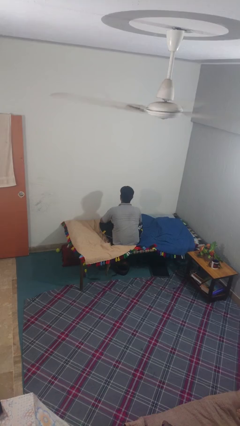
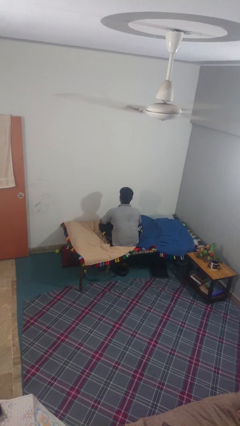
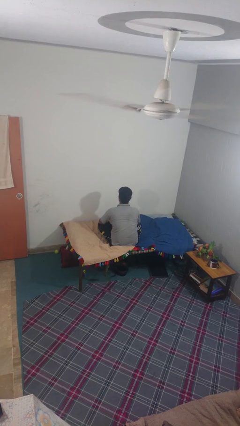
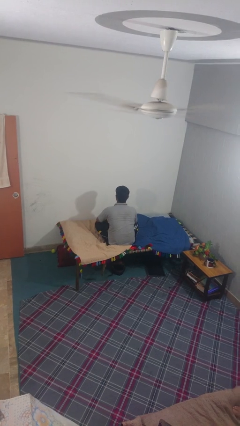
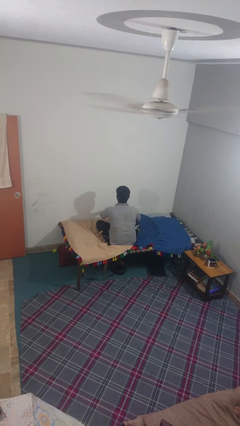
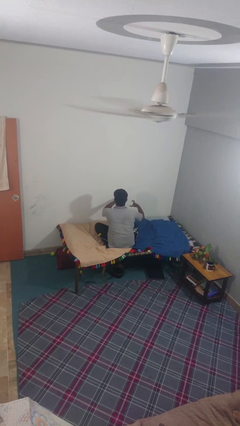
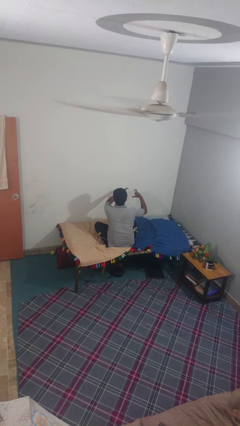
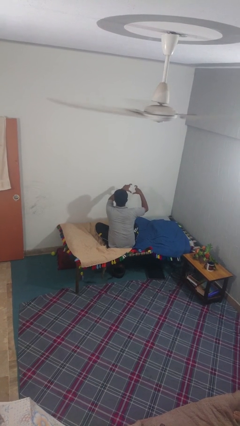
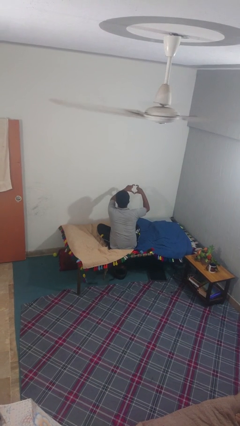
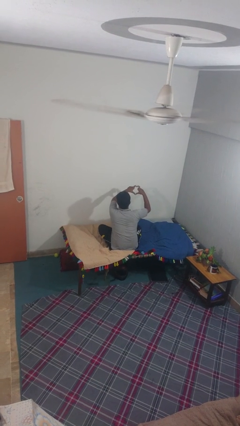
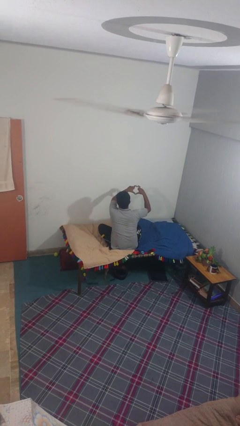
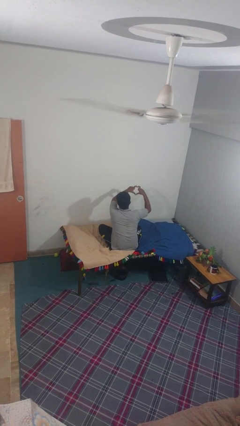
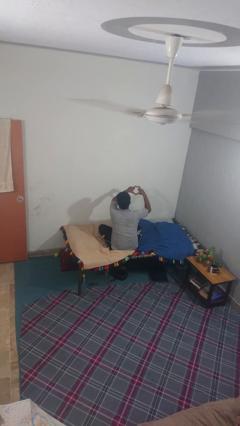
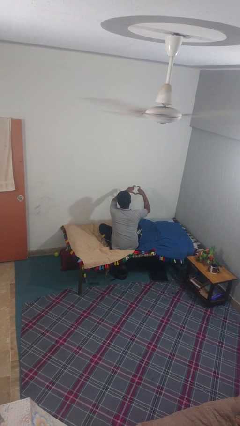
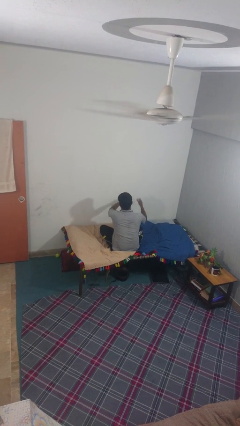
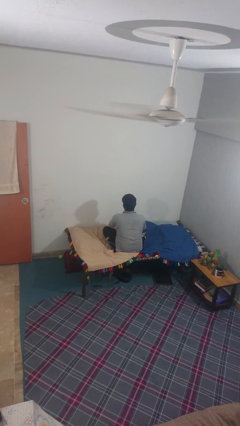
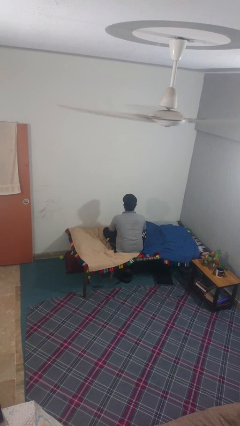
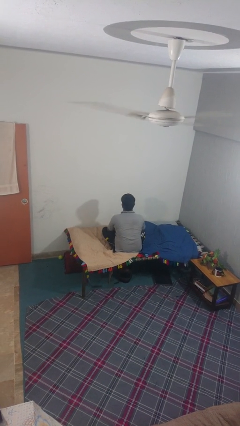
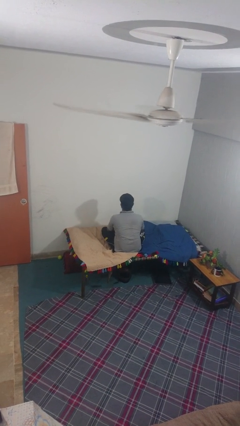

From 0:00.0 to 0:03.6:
person gestures heart

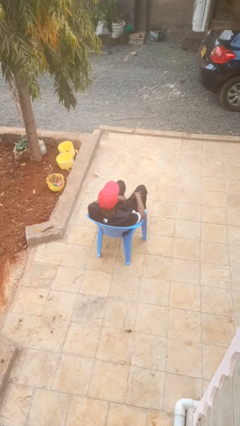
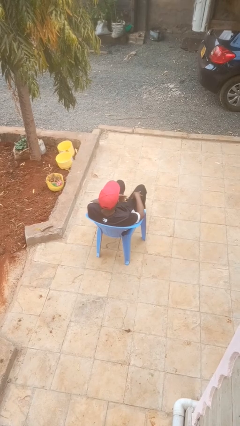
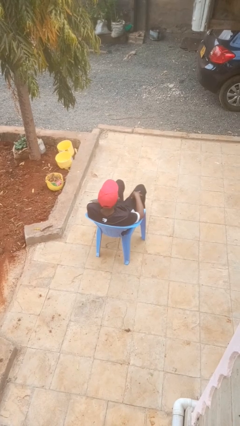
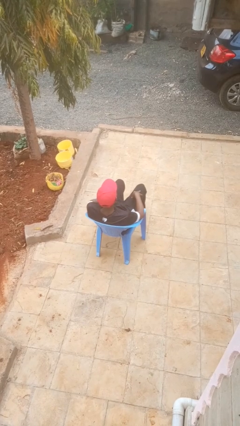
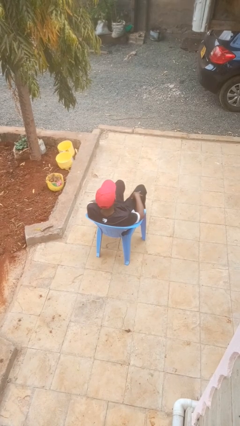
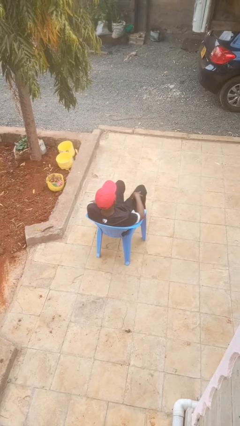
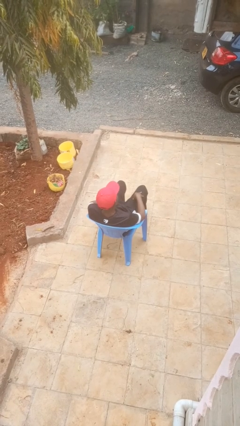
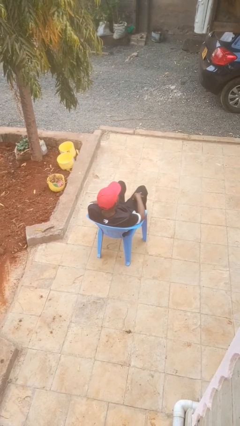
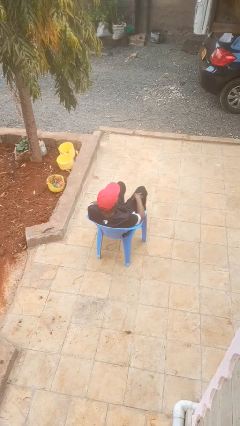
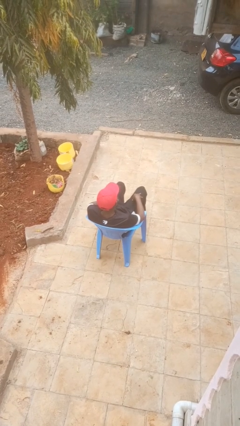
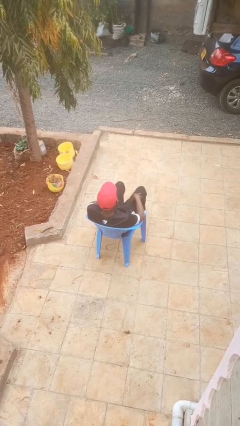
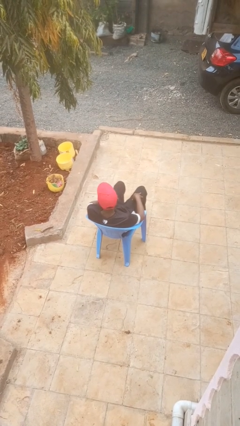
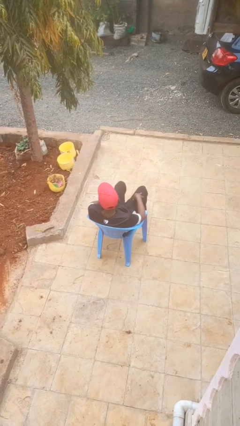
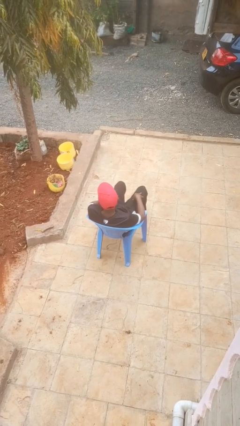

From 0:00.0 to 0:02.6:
person strokes chin

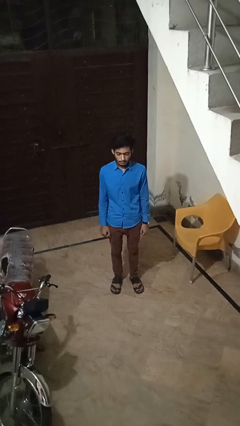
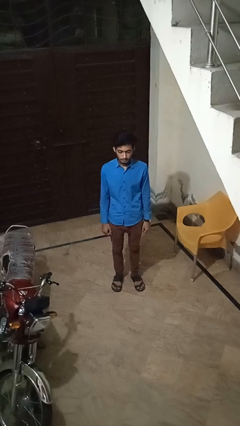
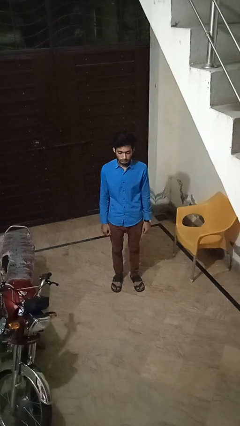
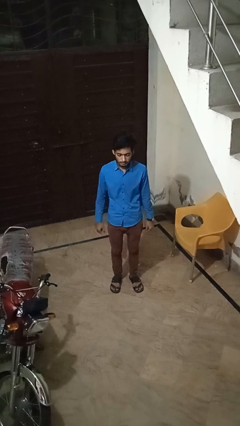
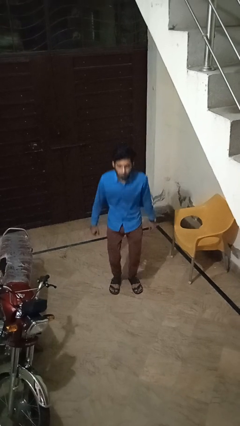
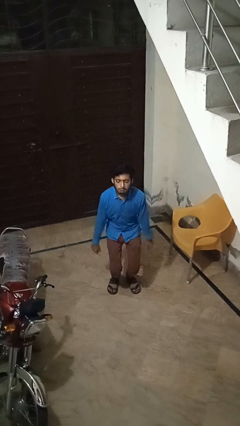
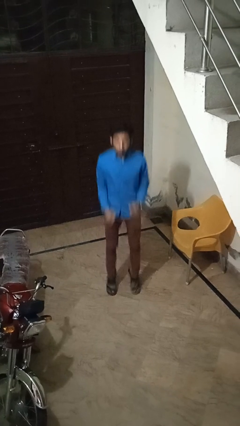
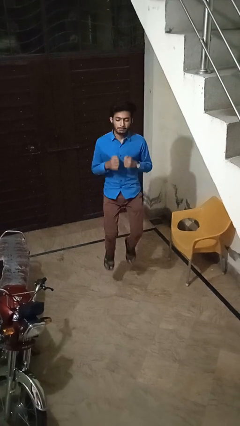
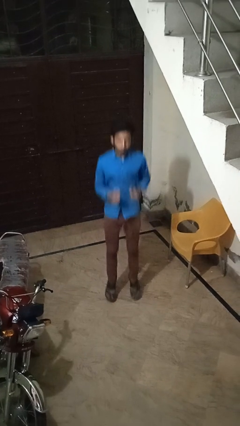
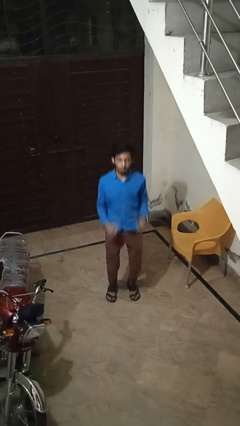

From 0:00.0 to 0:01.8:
person jumps

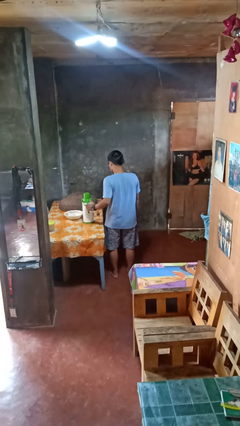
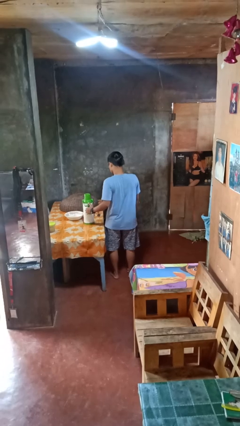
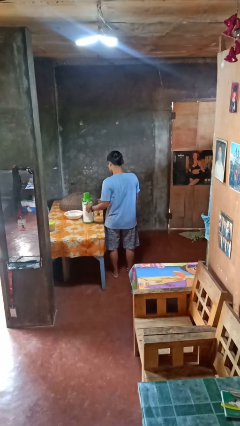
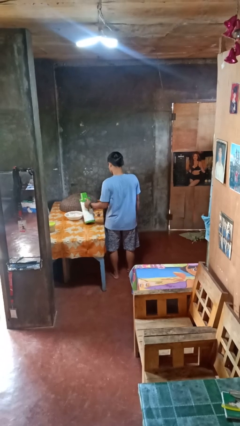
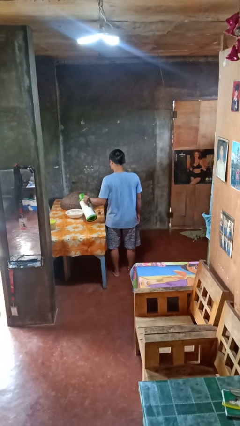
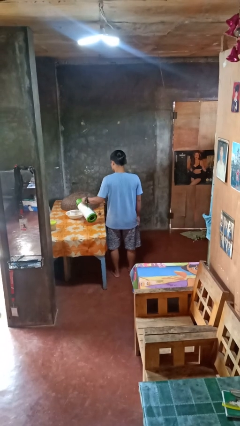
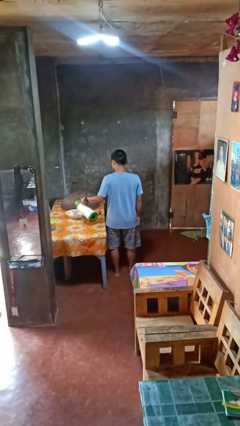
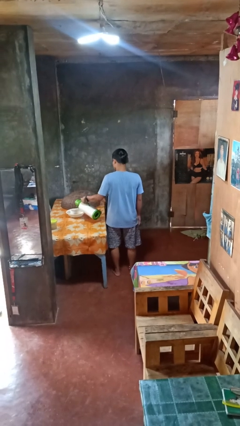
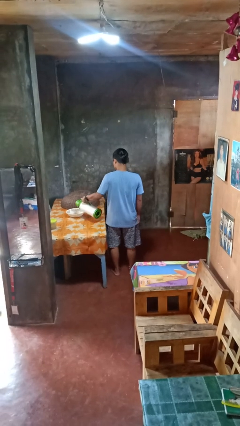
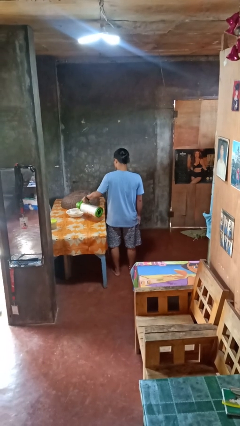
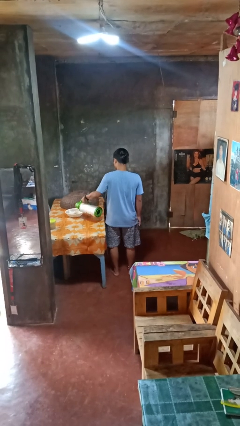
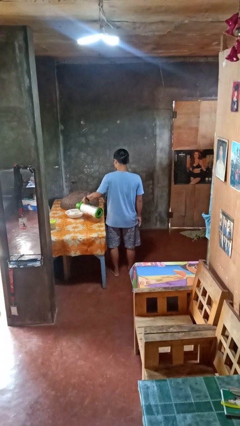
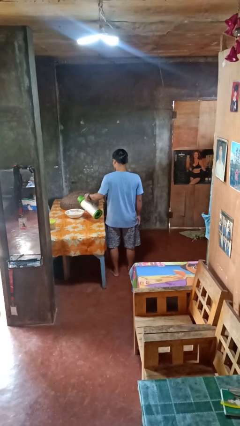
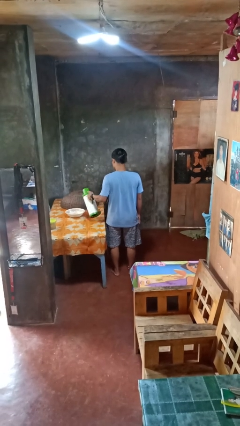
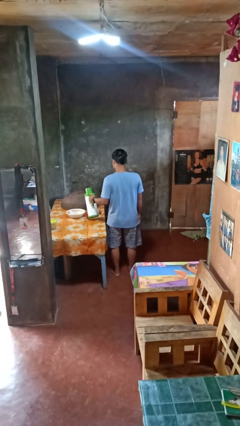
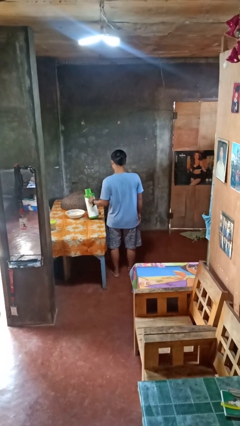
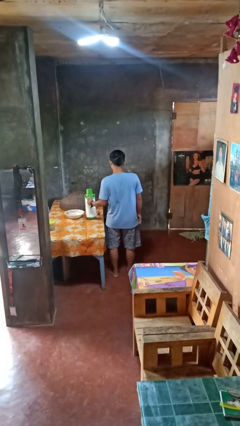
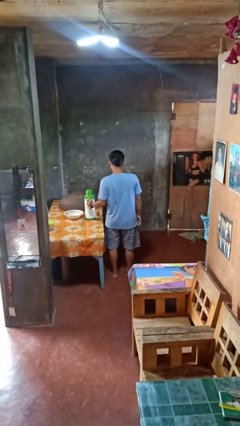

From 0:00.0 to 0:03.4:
person pours into bowl

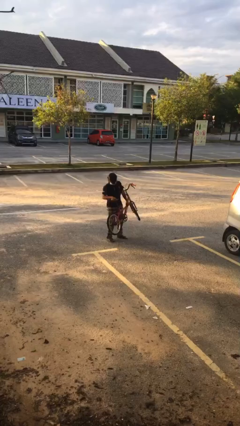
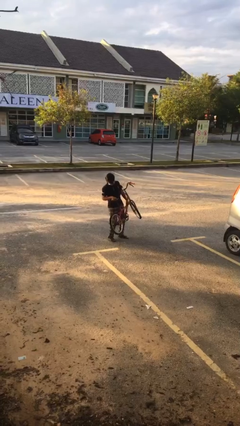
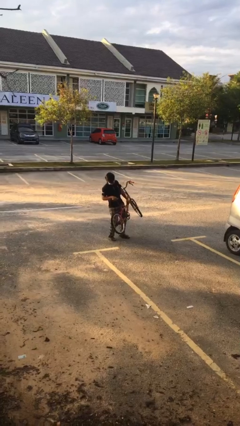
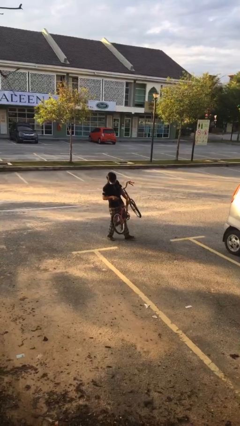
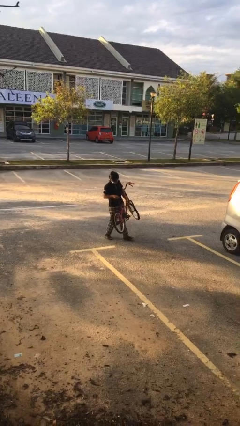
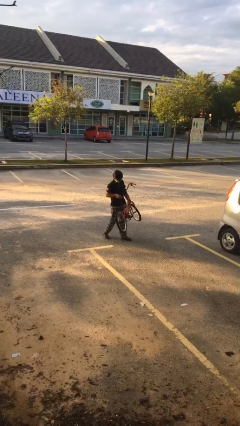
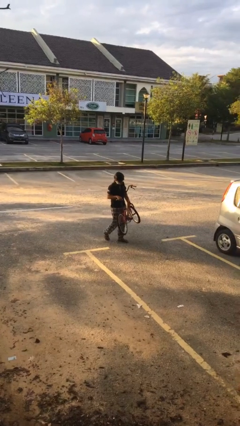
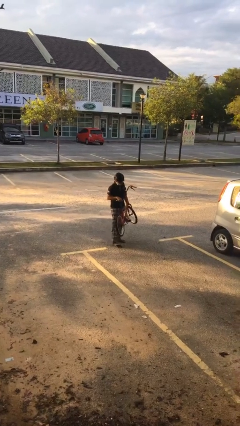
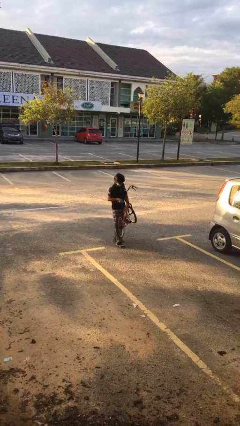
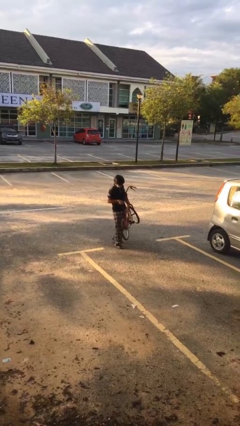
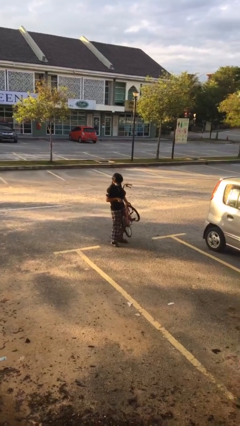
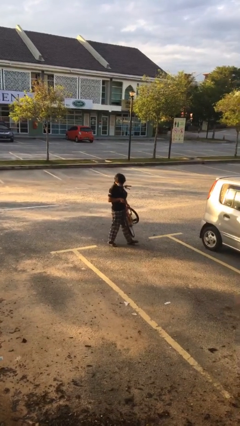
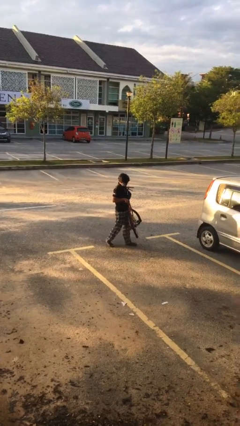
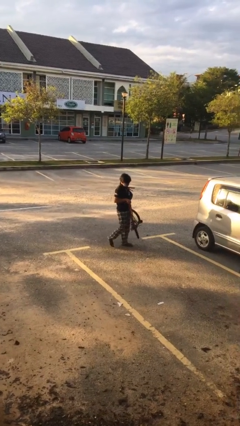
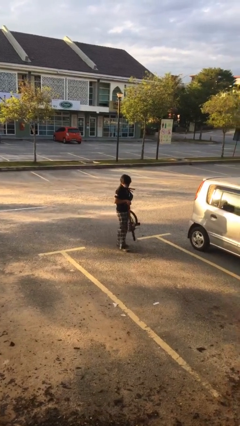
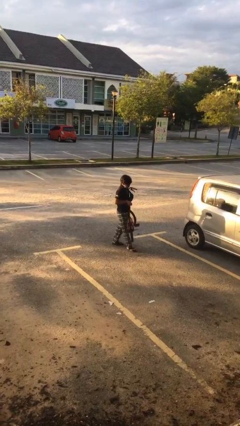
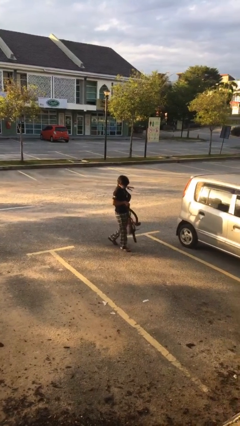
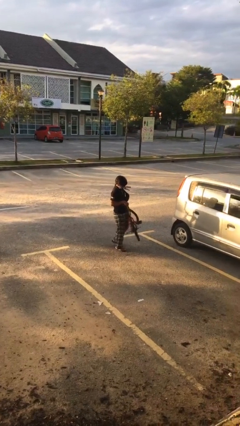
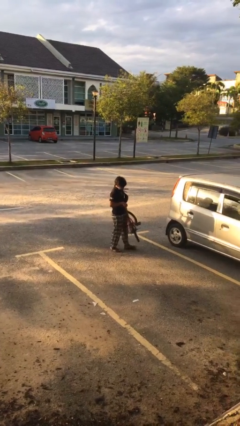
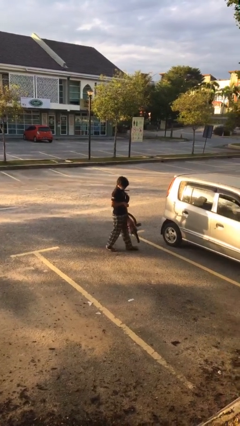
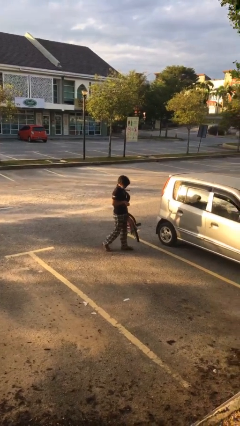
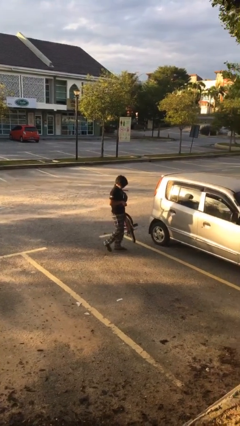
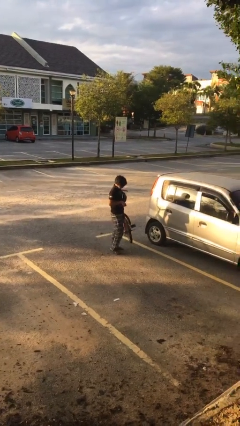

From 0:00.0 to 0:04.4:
person carries heavy object

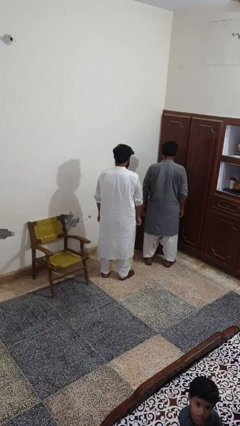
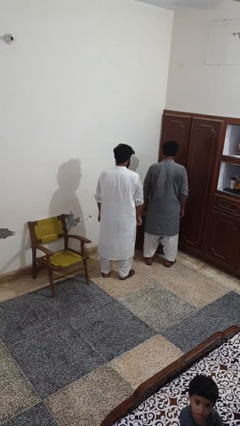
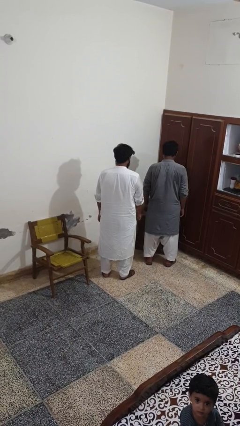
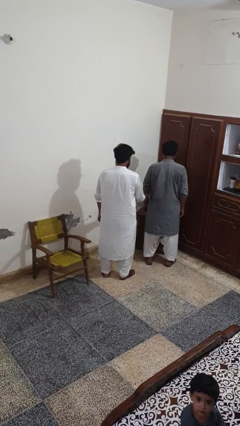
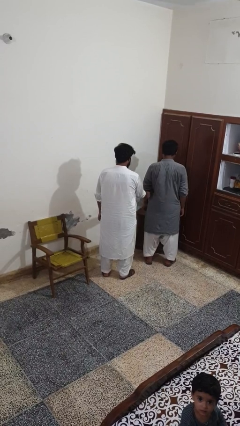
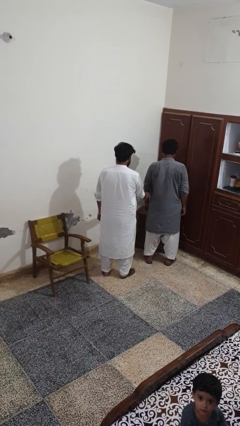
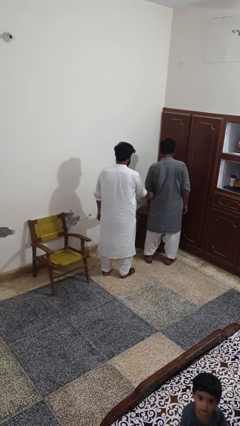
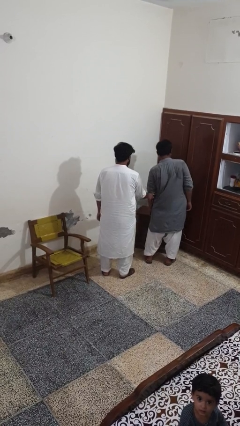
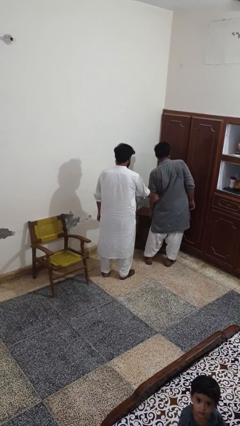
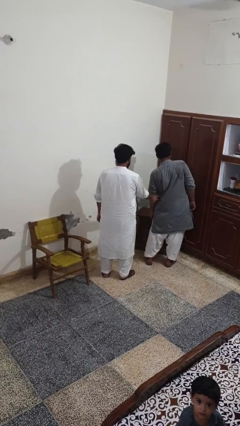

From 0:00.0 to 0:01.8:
person tickles person
